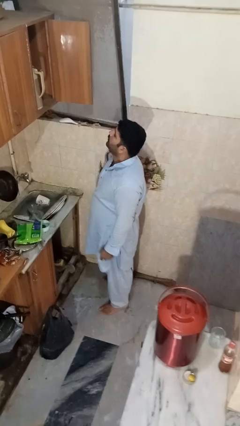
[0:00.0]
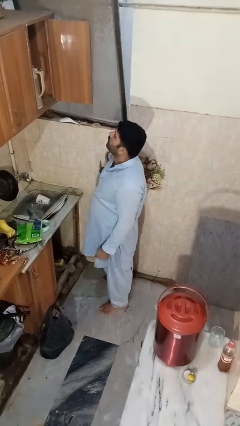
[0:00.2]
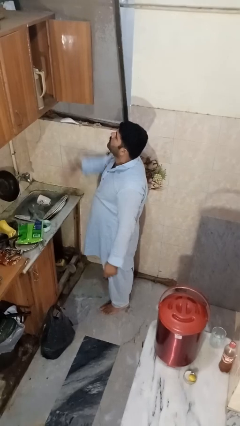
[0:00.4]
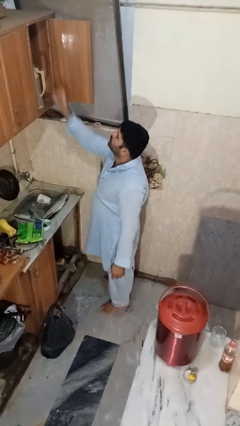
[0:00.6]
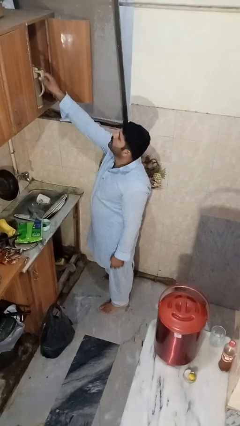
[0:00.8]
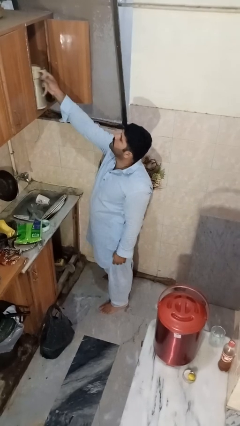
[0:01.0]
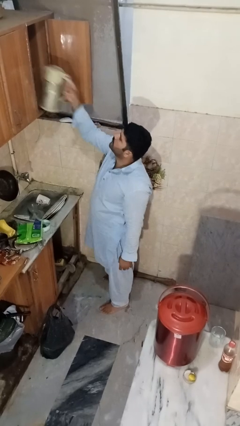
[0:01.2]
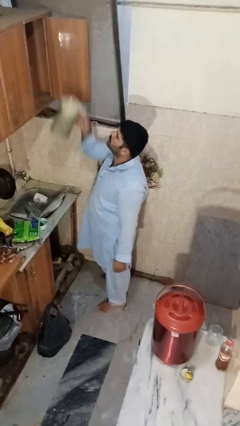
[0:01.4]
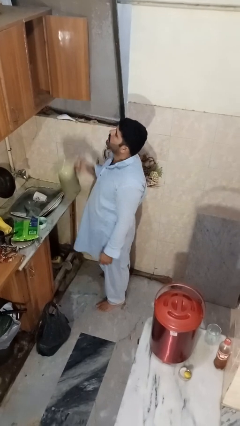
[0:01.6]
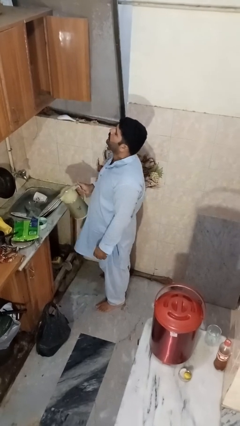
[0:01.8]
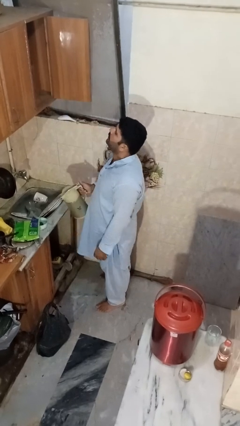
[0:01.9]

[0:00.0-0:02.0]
person takes object from cabinet

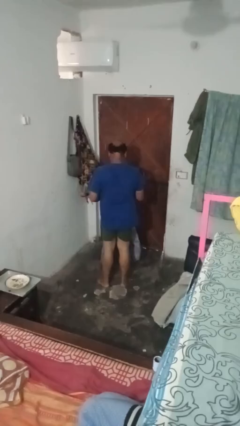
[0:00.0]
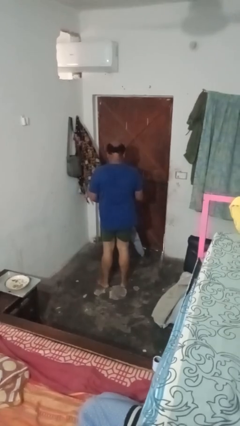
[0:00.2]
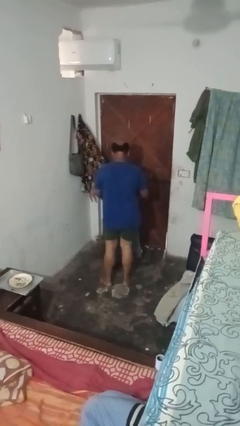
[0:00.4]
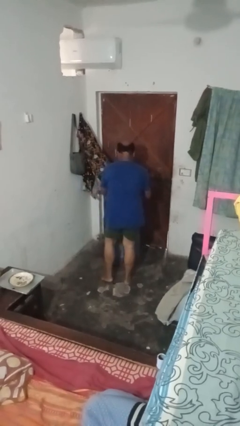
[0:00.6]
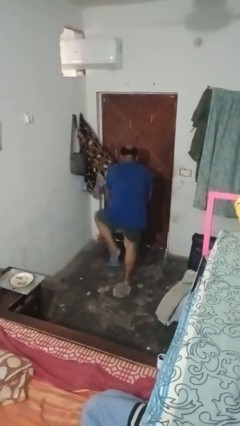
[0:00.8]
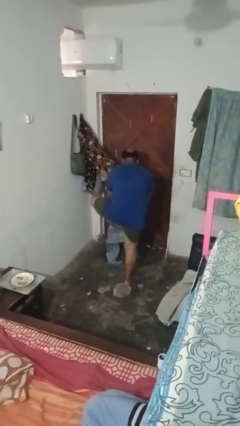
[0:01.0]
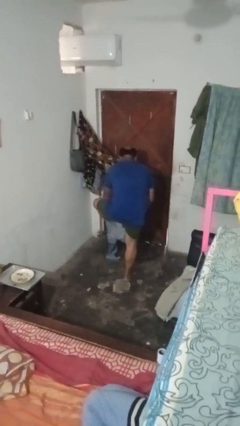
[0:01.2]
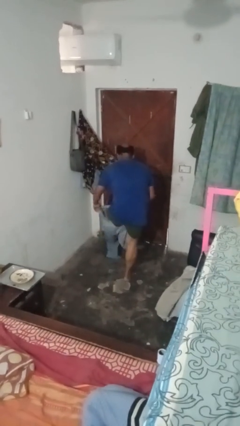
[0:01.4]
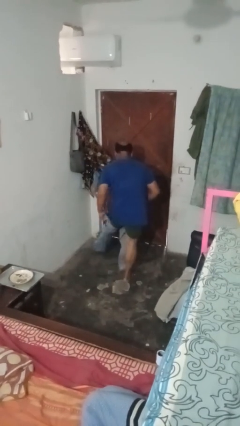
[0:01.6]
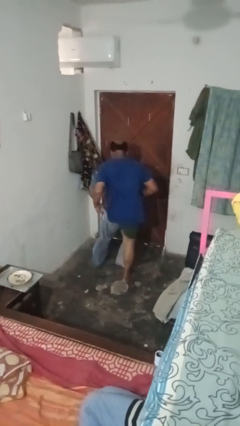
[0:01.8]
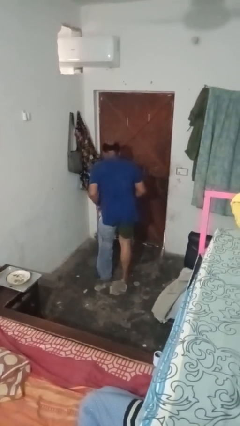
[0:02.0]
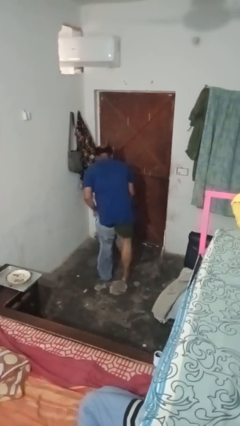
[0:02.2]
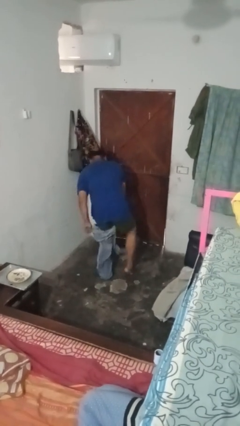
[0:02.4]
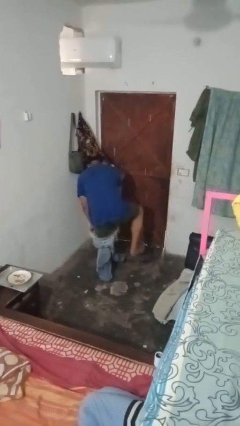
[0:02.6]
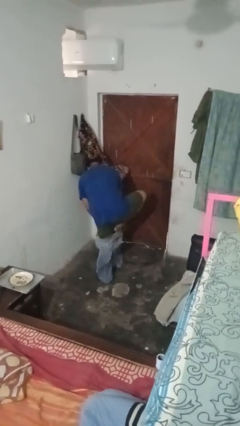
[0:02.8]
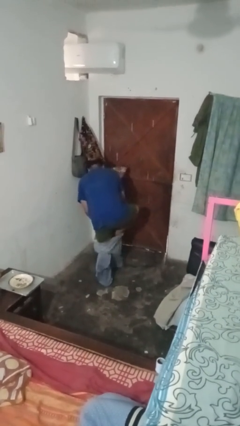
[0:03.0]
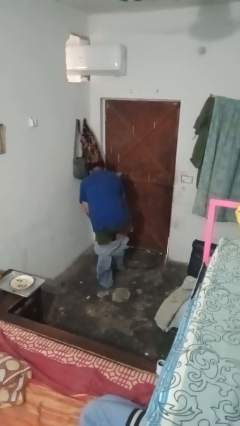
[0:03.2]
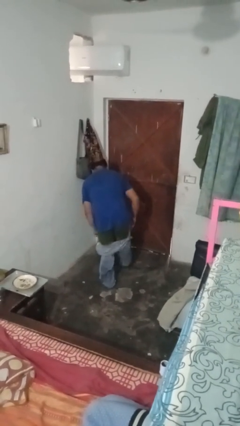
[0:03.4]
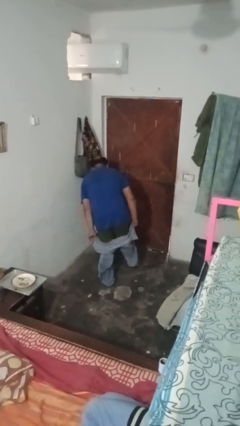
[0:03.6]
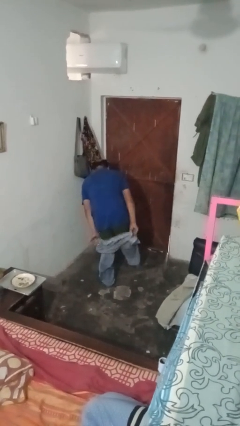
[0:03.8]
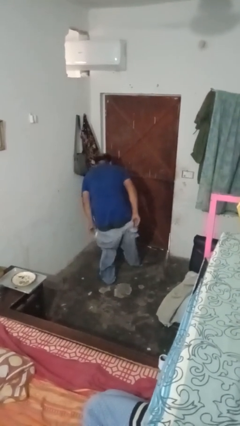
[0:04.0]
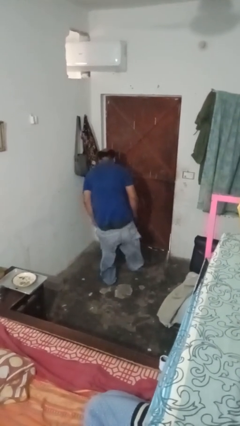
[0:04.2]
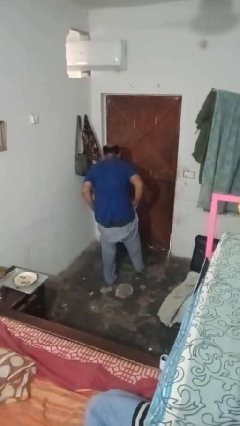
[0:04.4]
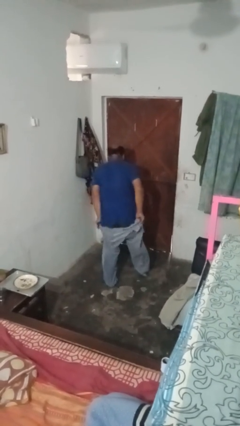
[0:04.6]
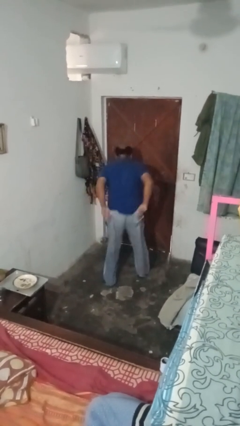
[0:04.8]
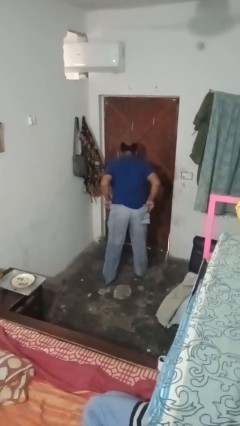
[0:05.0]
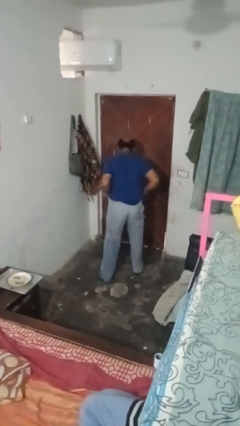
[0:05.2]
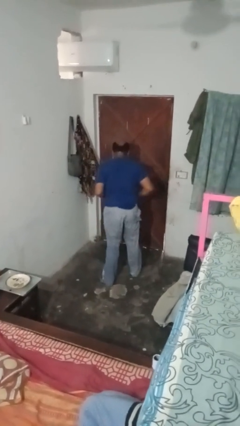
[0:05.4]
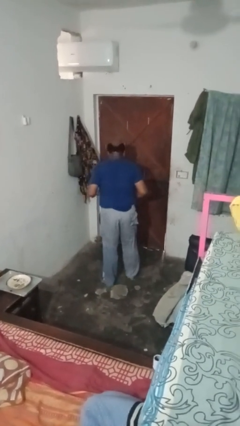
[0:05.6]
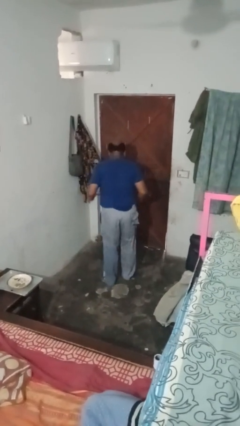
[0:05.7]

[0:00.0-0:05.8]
person puts on pants

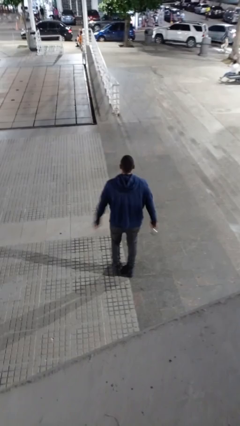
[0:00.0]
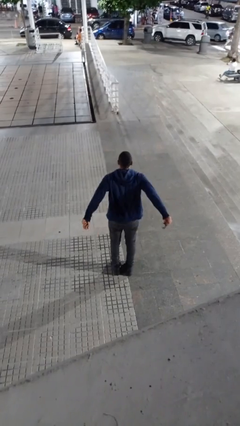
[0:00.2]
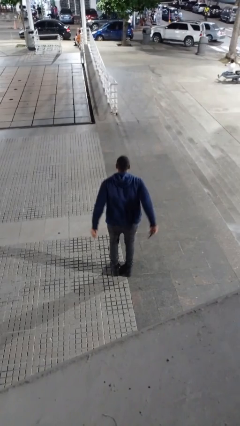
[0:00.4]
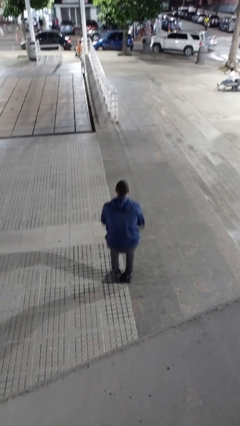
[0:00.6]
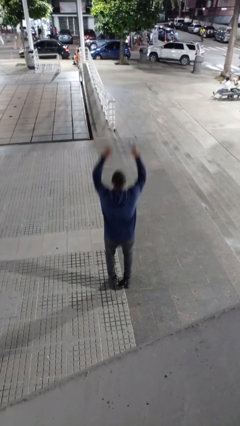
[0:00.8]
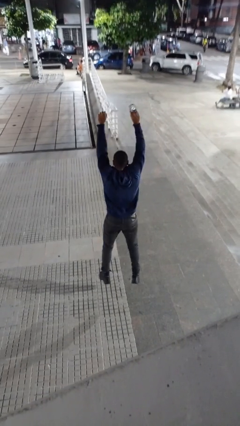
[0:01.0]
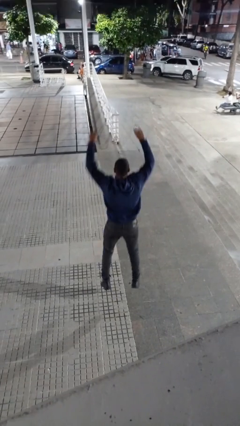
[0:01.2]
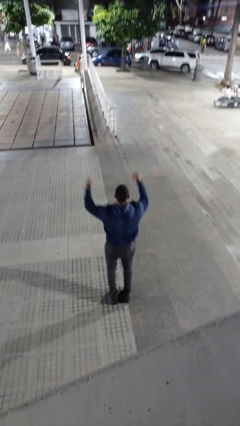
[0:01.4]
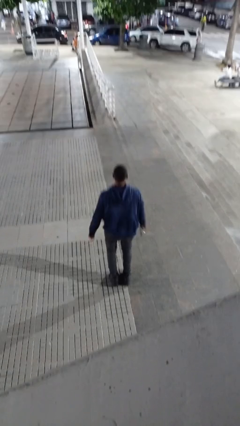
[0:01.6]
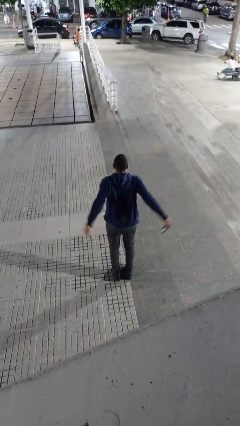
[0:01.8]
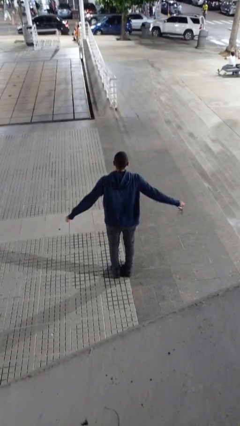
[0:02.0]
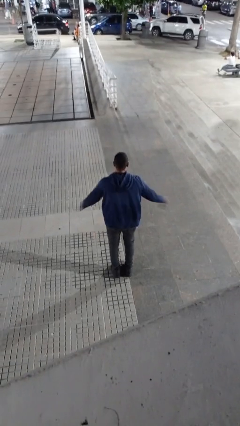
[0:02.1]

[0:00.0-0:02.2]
person jumps

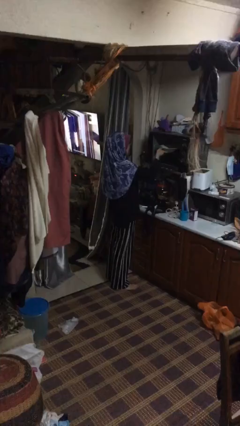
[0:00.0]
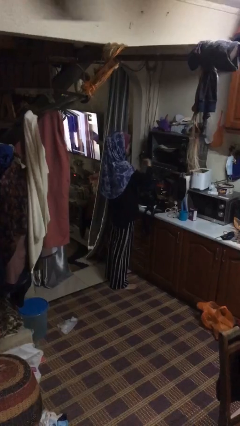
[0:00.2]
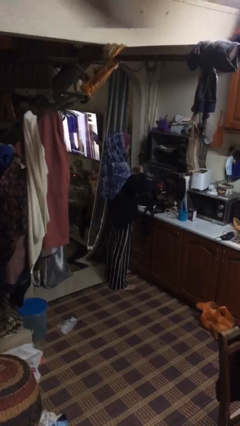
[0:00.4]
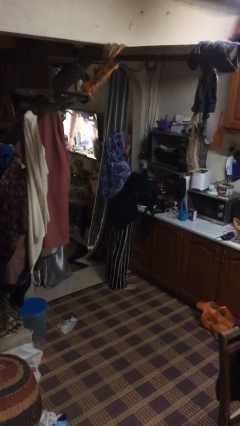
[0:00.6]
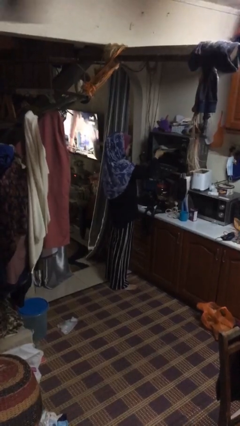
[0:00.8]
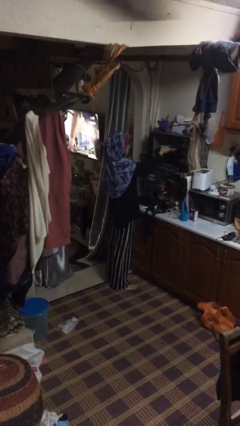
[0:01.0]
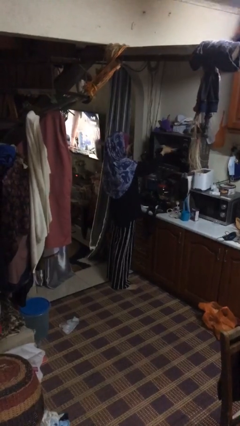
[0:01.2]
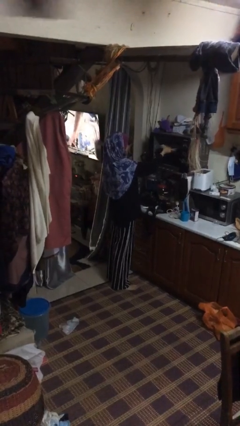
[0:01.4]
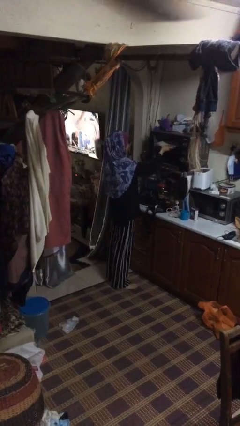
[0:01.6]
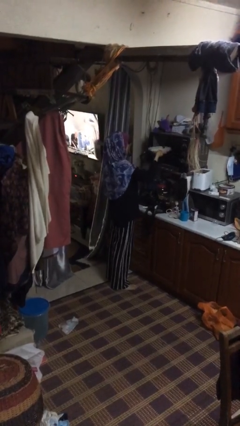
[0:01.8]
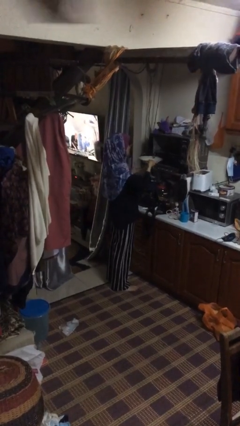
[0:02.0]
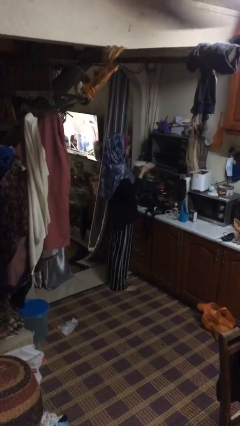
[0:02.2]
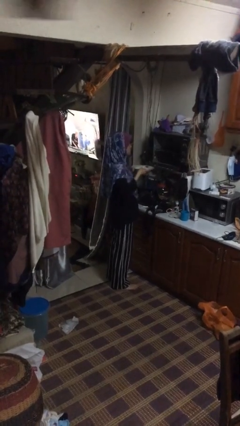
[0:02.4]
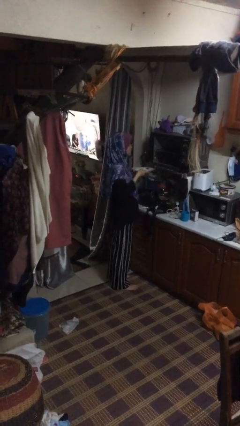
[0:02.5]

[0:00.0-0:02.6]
person takes object from oven

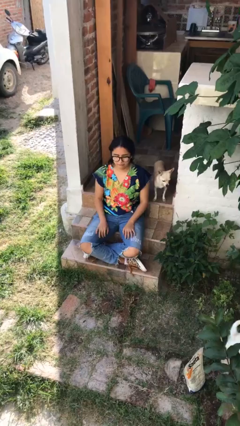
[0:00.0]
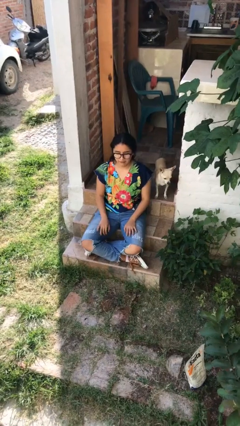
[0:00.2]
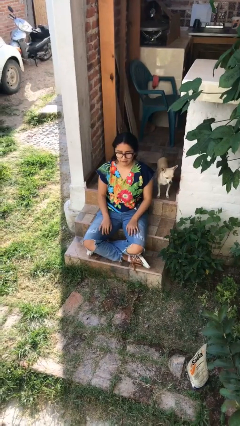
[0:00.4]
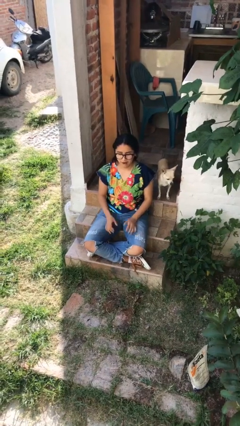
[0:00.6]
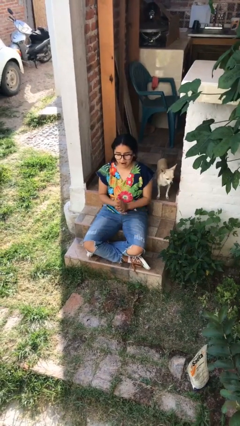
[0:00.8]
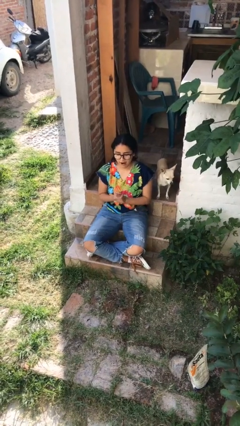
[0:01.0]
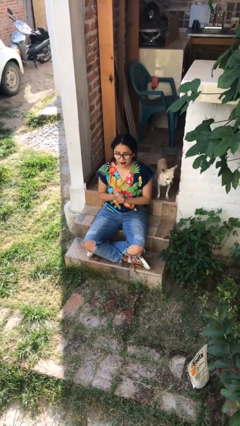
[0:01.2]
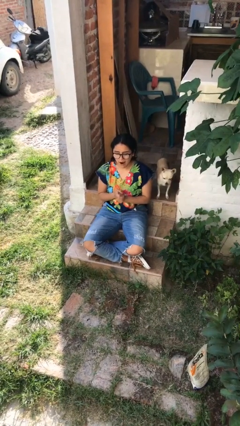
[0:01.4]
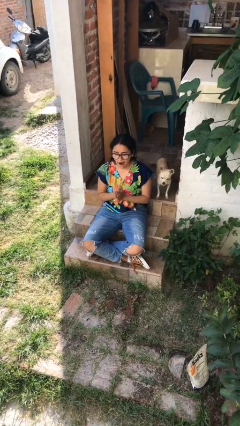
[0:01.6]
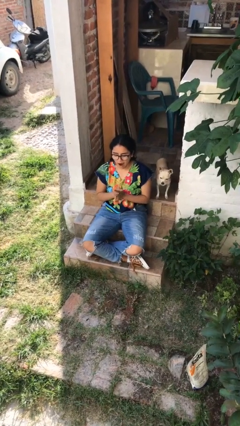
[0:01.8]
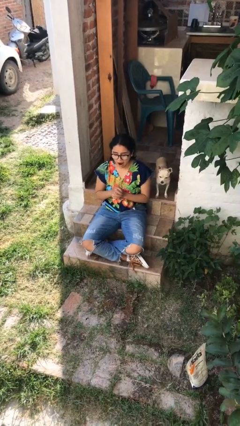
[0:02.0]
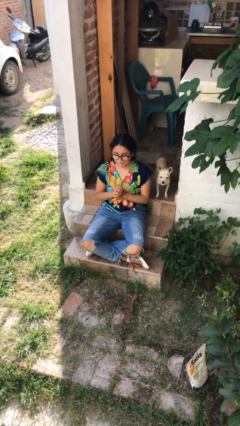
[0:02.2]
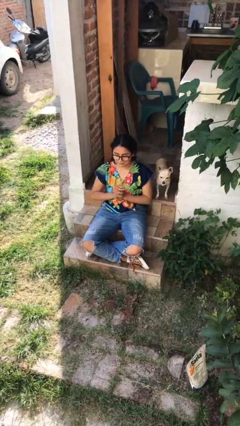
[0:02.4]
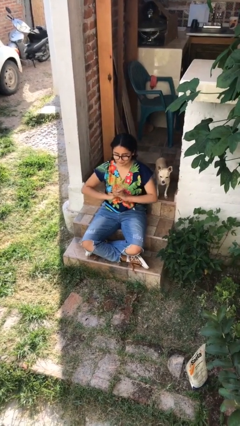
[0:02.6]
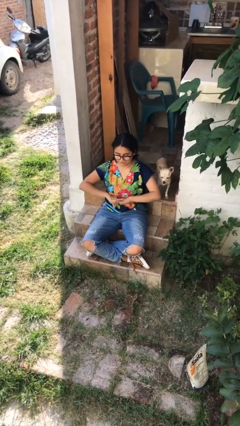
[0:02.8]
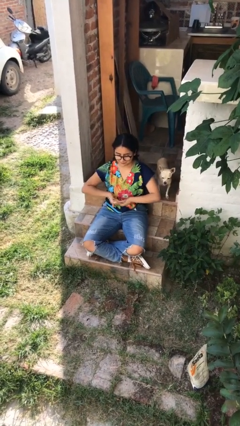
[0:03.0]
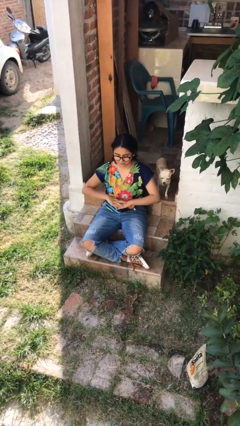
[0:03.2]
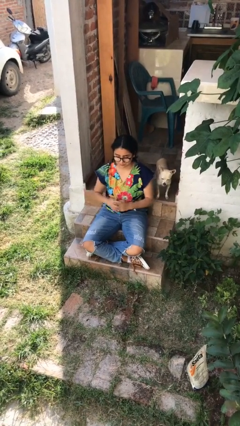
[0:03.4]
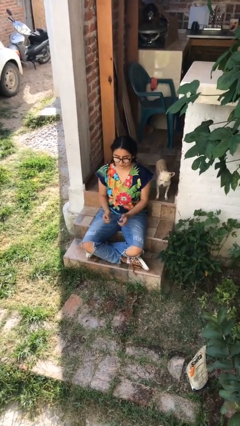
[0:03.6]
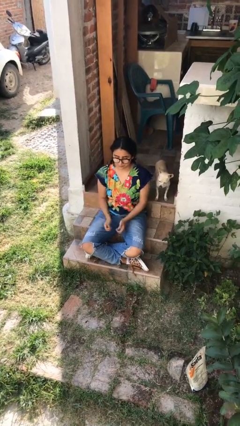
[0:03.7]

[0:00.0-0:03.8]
person cracks knuckles

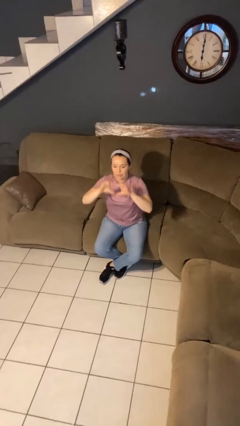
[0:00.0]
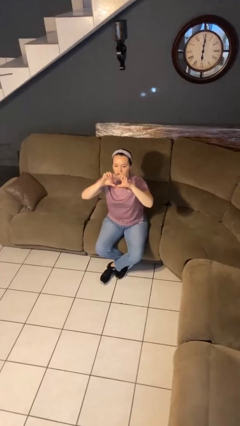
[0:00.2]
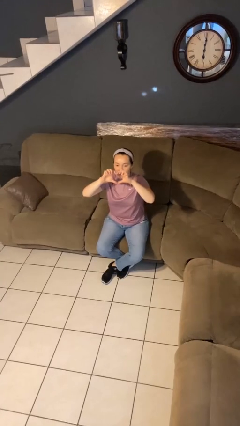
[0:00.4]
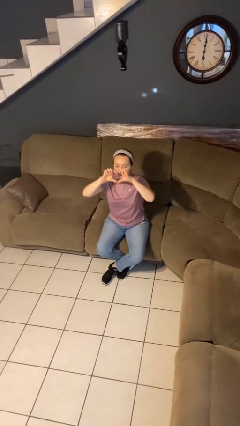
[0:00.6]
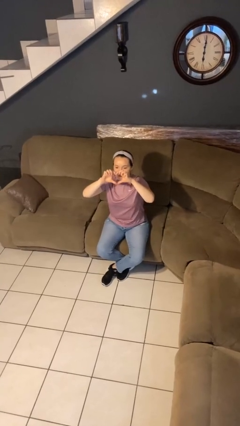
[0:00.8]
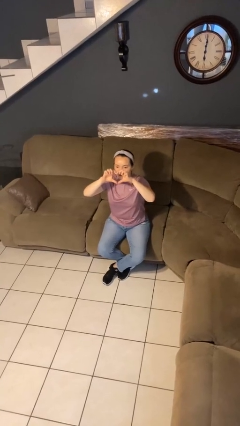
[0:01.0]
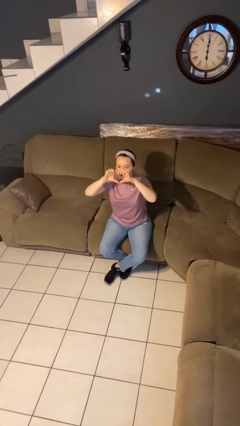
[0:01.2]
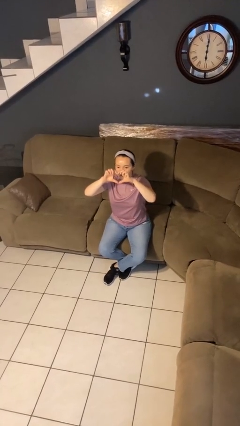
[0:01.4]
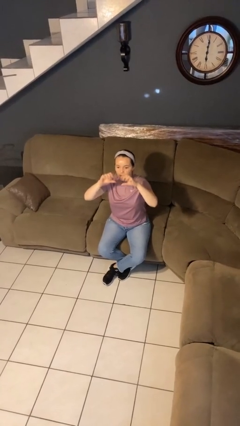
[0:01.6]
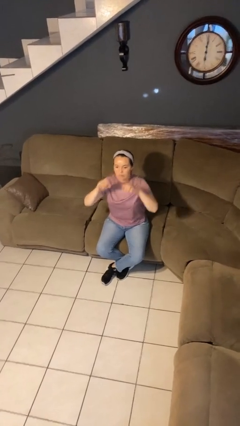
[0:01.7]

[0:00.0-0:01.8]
person gestures heart
